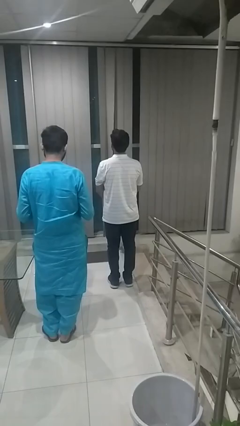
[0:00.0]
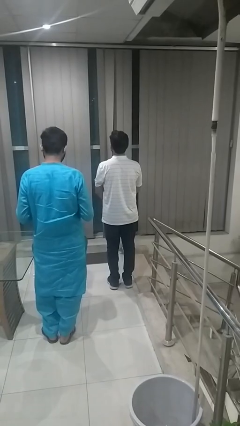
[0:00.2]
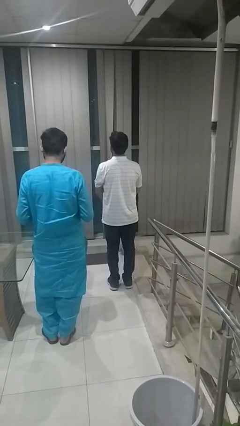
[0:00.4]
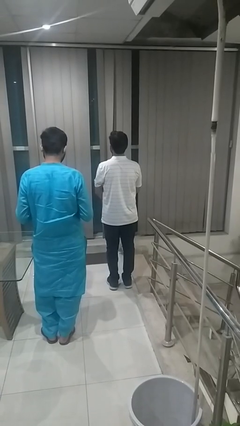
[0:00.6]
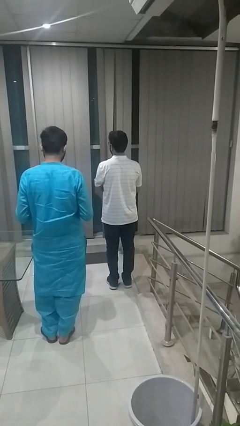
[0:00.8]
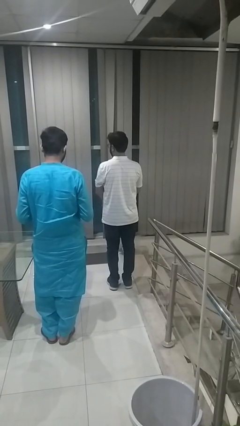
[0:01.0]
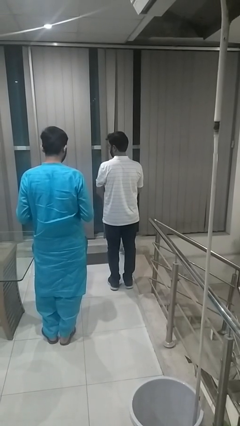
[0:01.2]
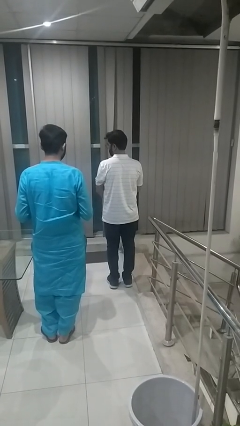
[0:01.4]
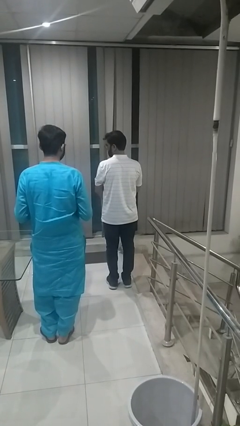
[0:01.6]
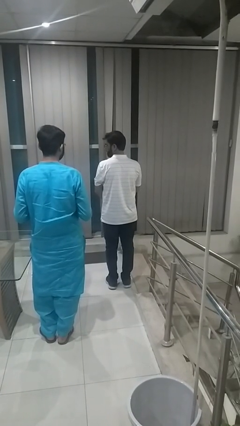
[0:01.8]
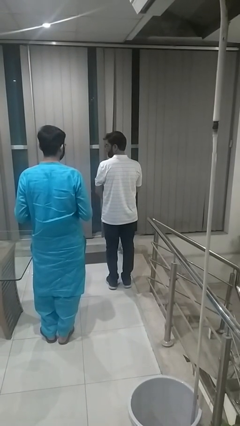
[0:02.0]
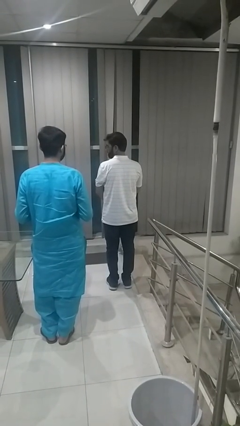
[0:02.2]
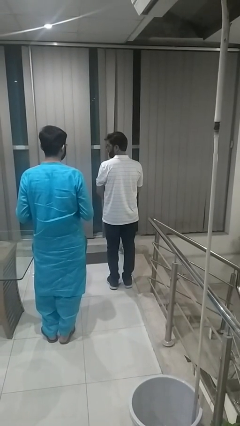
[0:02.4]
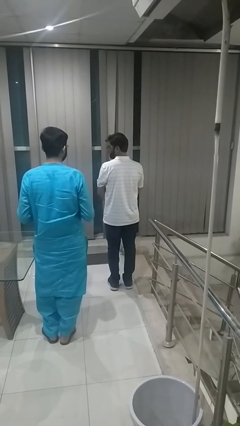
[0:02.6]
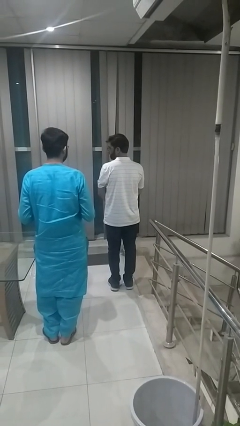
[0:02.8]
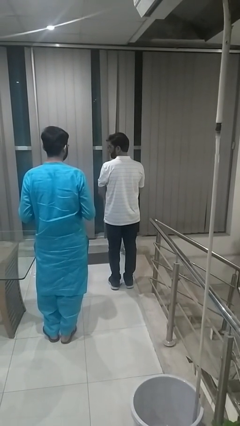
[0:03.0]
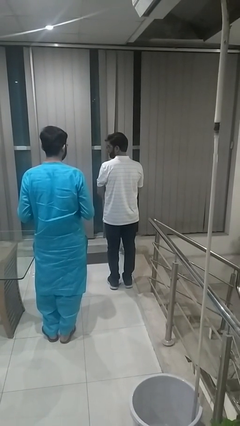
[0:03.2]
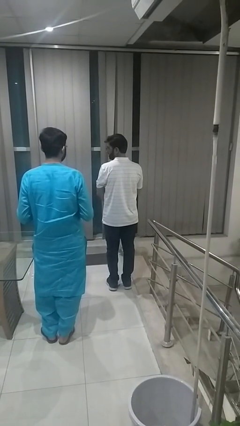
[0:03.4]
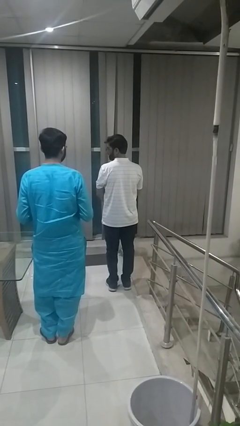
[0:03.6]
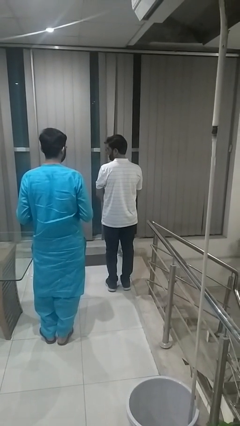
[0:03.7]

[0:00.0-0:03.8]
person looks over shoulder

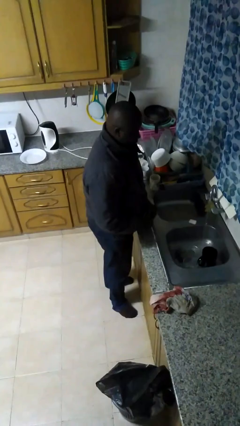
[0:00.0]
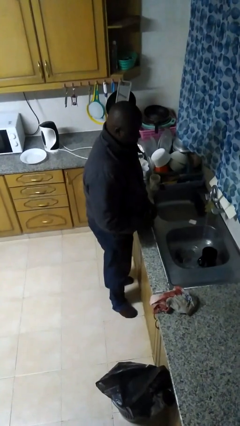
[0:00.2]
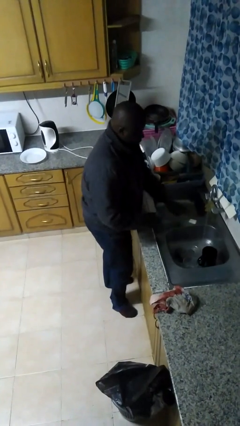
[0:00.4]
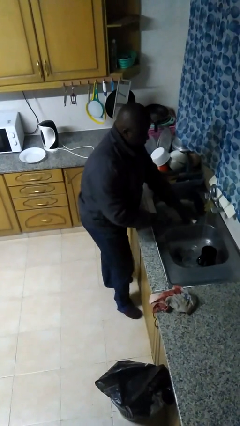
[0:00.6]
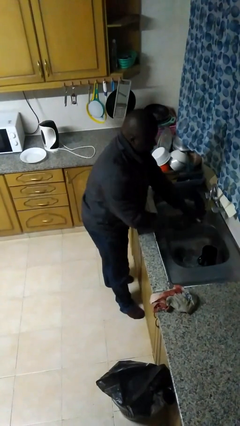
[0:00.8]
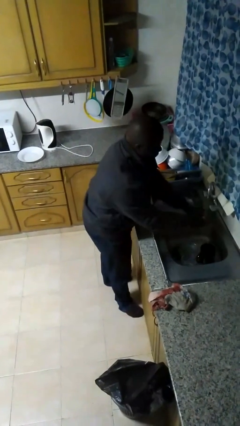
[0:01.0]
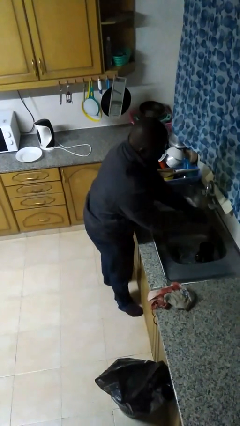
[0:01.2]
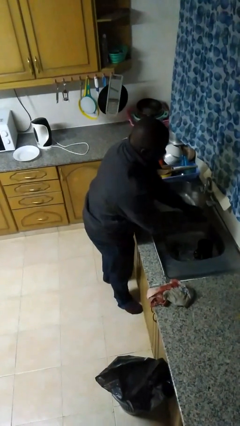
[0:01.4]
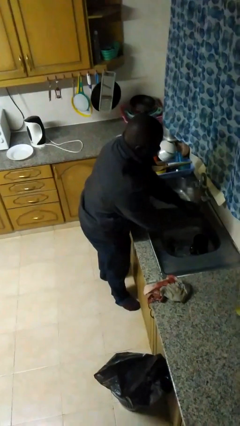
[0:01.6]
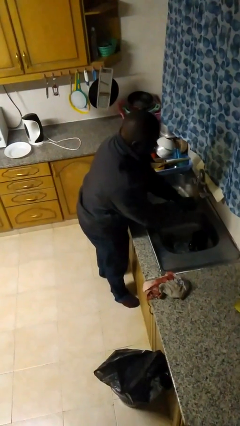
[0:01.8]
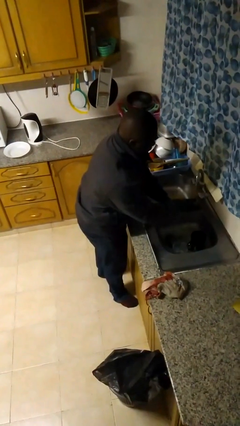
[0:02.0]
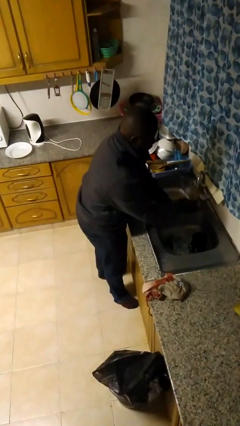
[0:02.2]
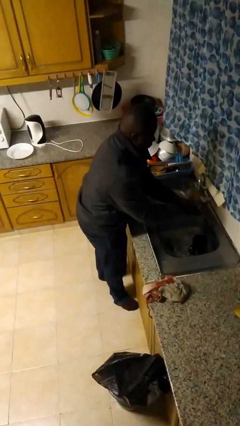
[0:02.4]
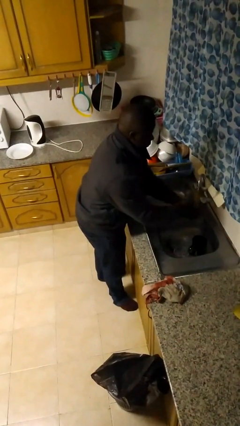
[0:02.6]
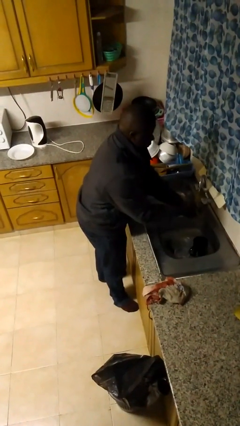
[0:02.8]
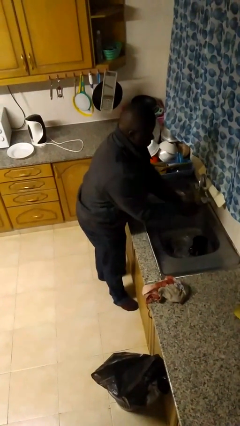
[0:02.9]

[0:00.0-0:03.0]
person washes hands

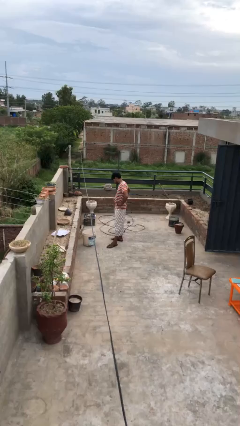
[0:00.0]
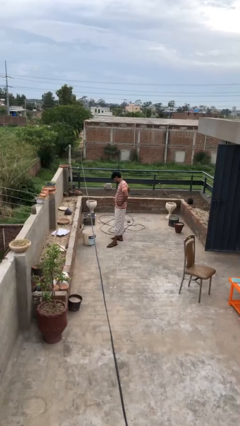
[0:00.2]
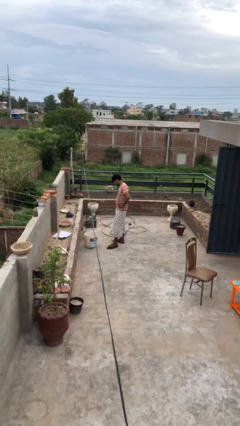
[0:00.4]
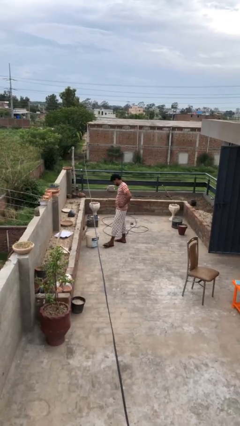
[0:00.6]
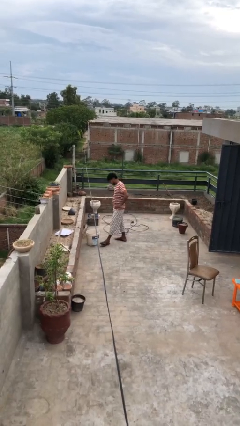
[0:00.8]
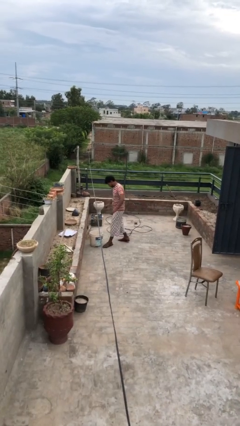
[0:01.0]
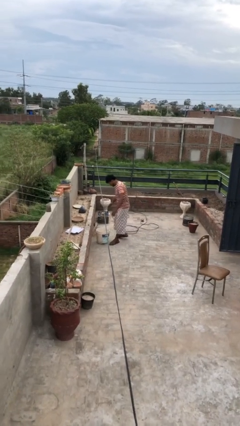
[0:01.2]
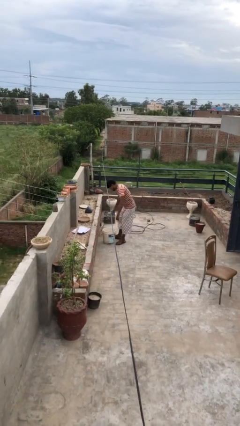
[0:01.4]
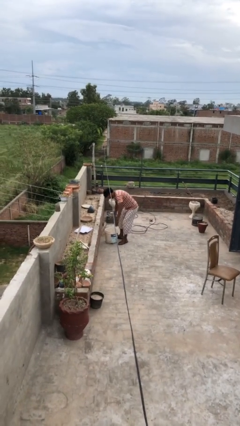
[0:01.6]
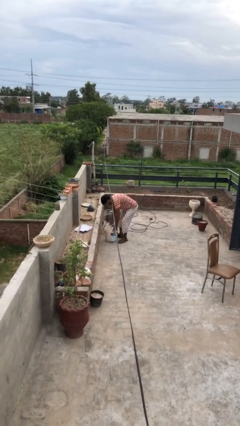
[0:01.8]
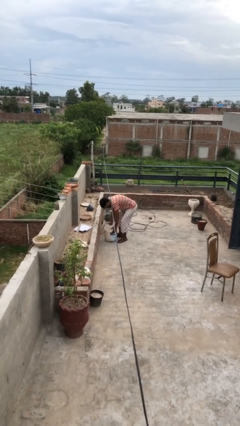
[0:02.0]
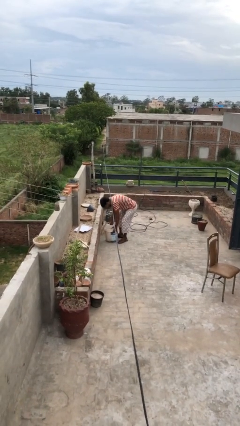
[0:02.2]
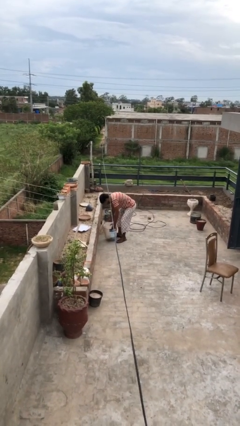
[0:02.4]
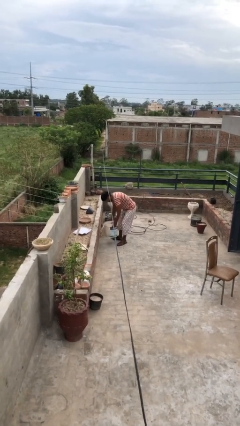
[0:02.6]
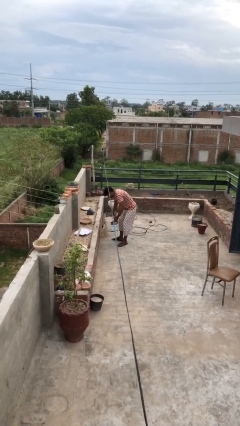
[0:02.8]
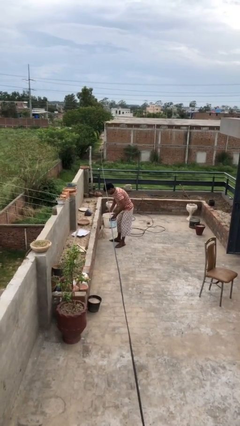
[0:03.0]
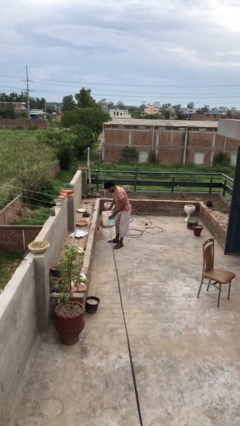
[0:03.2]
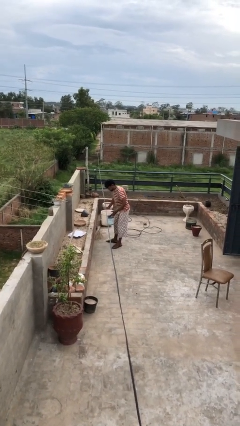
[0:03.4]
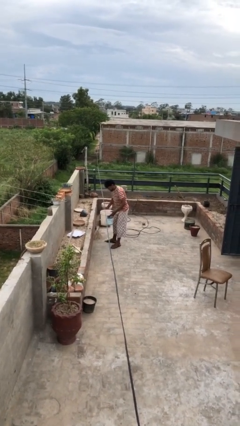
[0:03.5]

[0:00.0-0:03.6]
person picks up object from floor

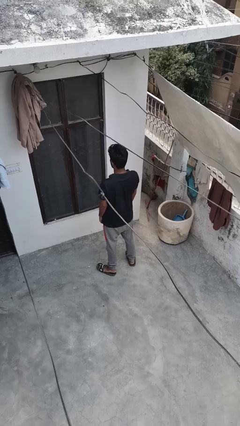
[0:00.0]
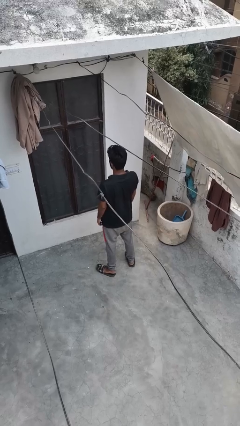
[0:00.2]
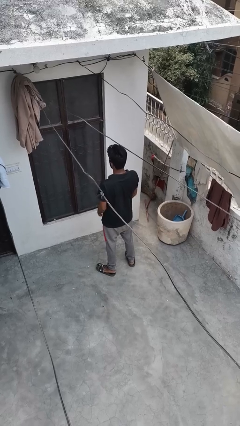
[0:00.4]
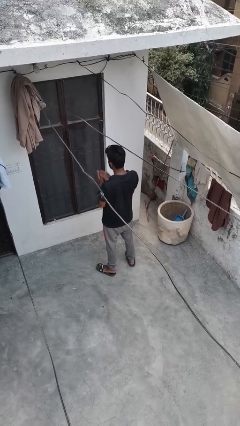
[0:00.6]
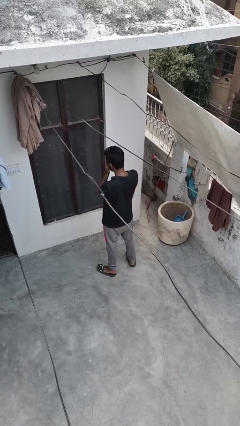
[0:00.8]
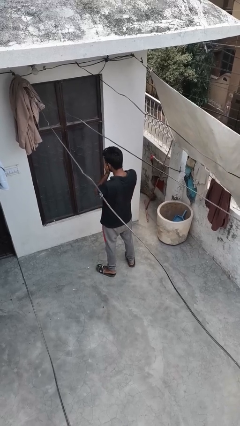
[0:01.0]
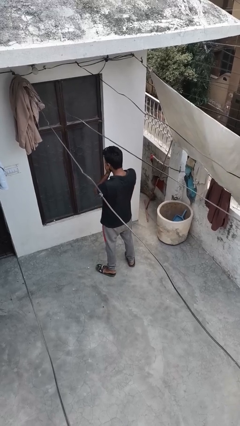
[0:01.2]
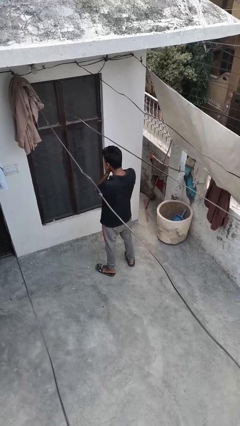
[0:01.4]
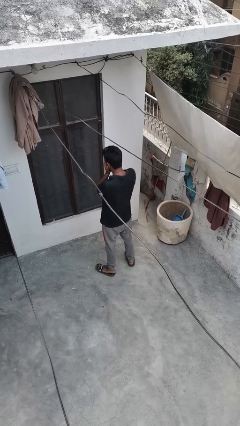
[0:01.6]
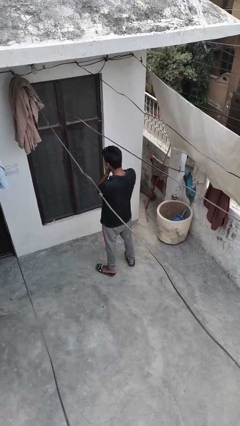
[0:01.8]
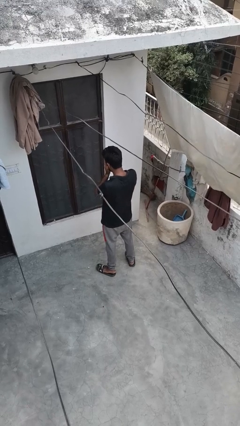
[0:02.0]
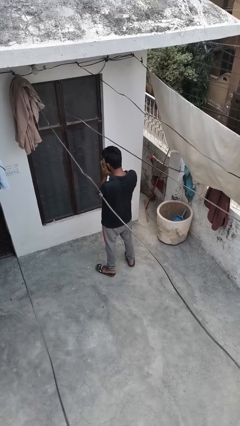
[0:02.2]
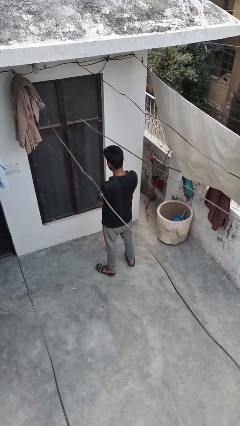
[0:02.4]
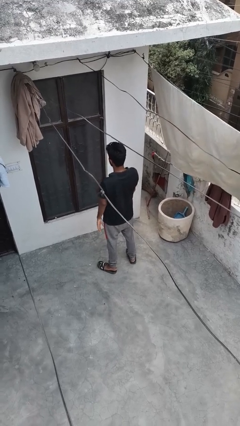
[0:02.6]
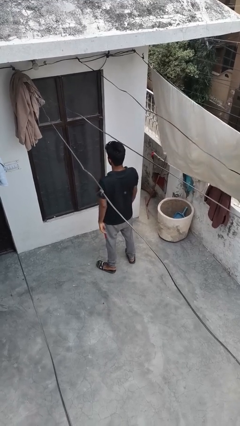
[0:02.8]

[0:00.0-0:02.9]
person covers face with hands

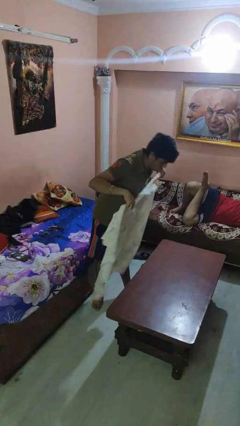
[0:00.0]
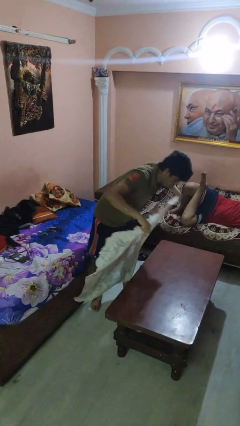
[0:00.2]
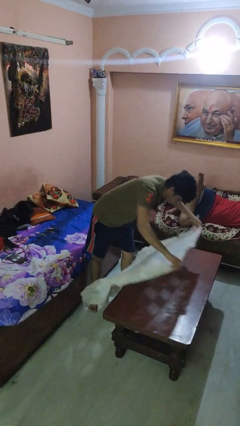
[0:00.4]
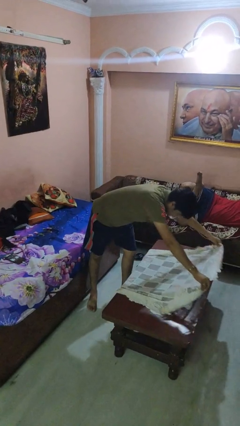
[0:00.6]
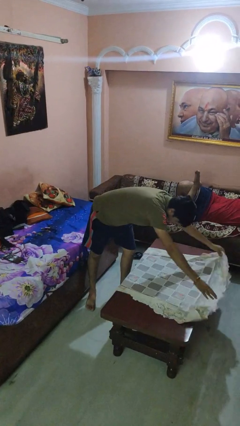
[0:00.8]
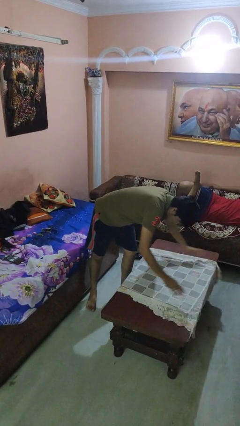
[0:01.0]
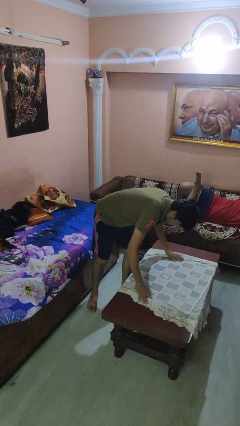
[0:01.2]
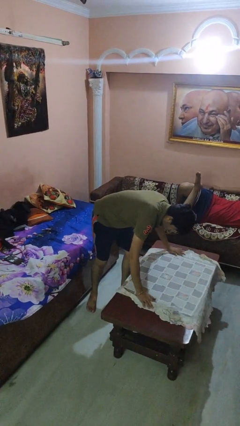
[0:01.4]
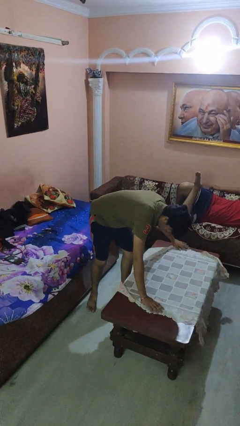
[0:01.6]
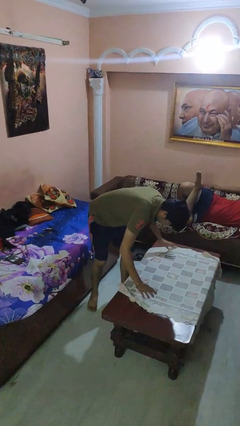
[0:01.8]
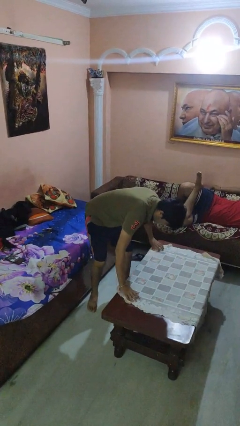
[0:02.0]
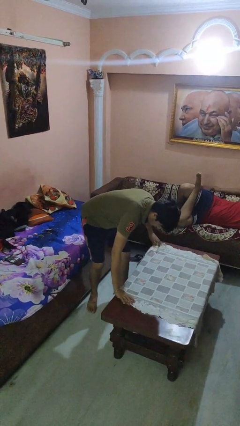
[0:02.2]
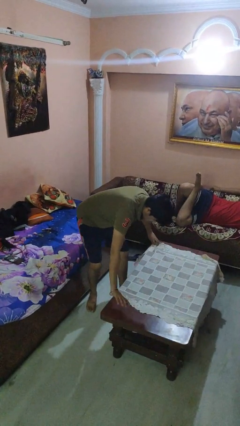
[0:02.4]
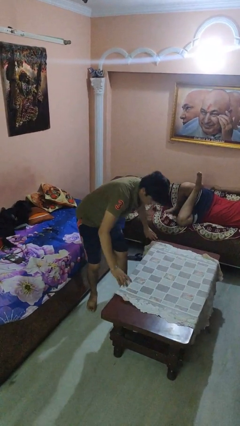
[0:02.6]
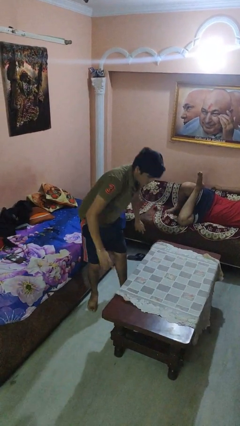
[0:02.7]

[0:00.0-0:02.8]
person spreads tablecloth

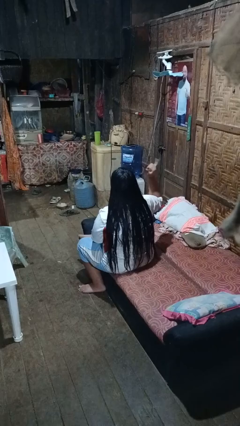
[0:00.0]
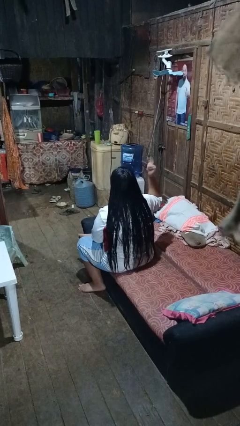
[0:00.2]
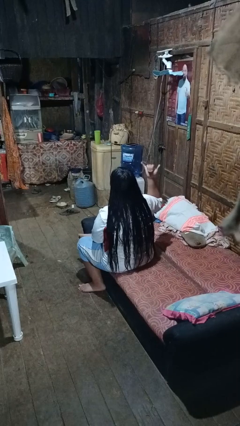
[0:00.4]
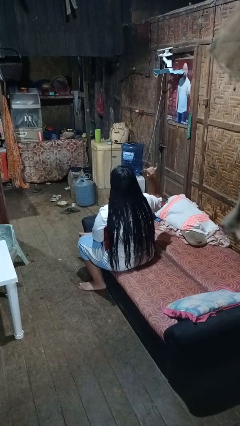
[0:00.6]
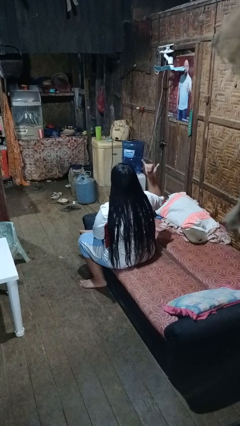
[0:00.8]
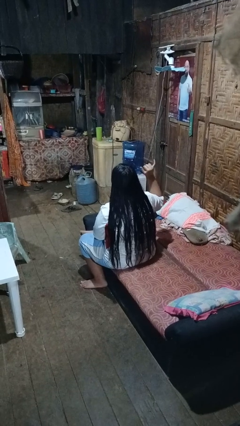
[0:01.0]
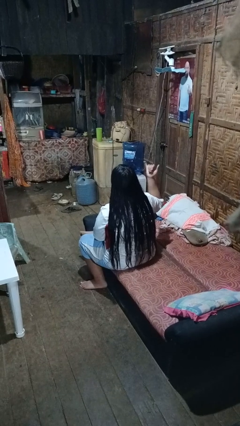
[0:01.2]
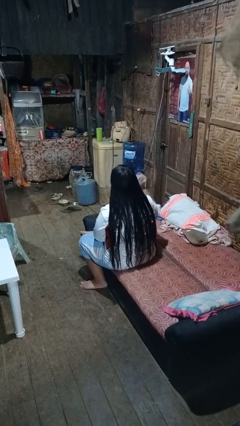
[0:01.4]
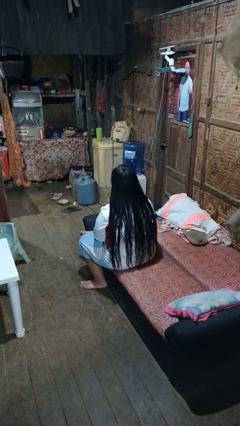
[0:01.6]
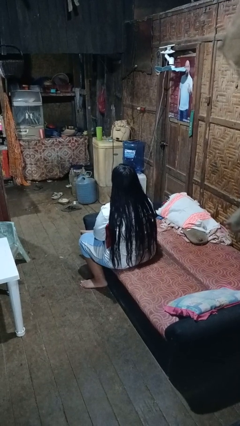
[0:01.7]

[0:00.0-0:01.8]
person gestures hang loose
